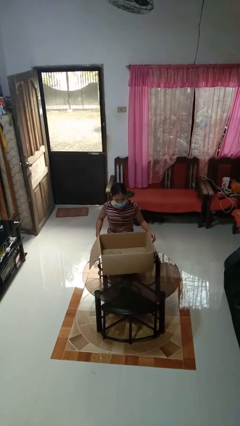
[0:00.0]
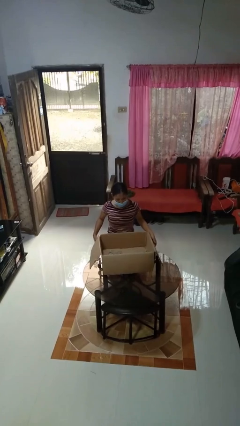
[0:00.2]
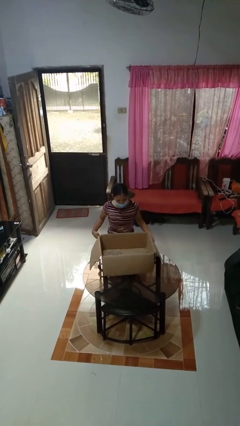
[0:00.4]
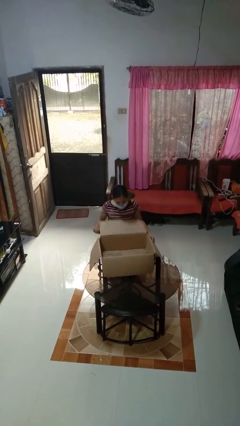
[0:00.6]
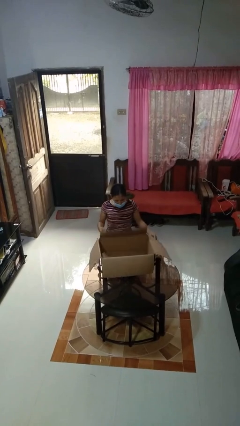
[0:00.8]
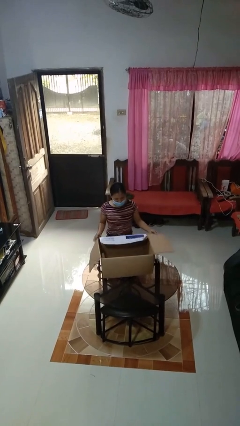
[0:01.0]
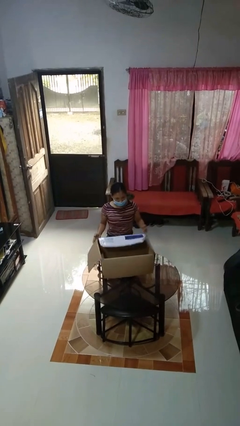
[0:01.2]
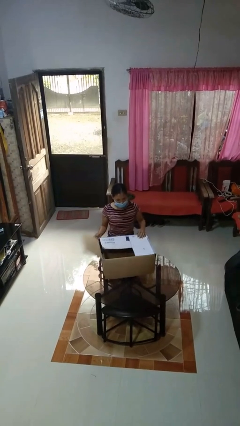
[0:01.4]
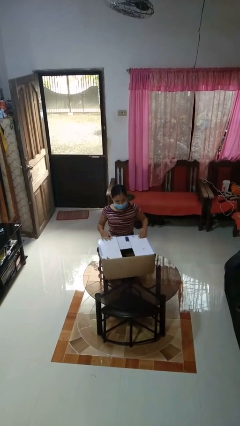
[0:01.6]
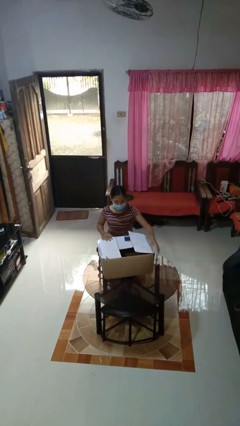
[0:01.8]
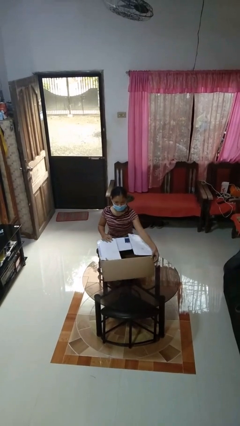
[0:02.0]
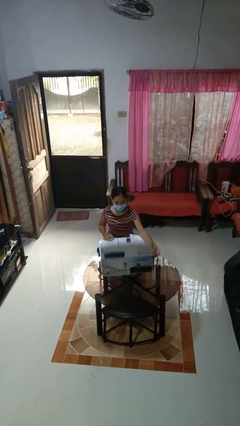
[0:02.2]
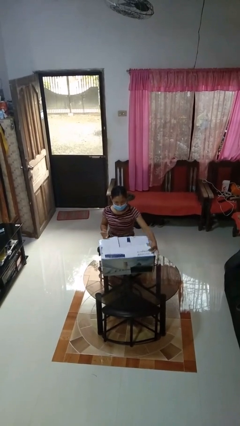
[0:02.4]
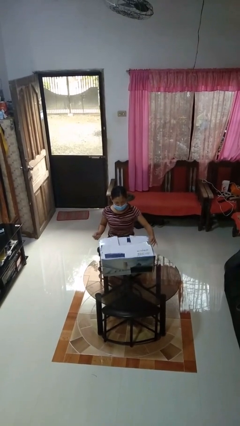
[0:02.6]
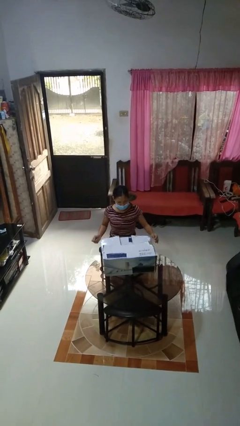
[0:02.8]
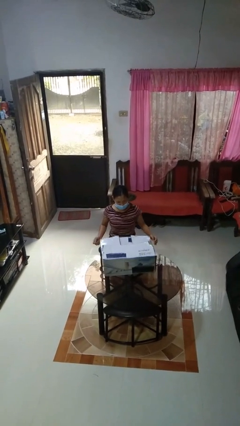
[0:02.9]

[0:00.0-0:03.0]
person closes box

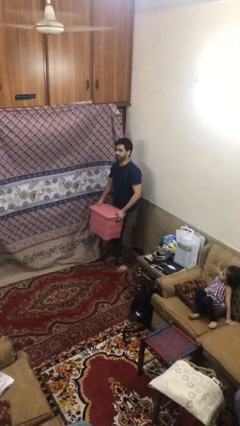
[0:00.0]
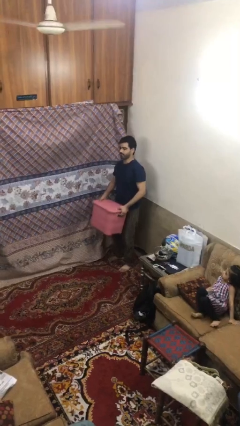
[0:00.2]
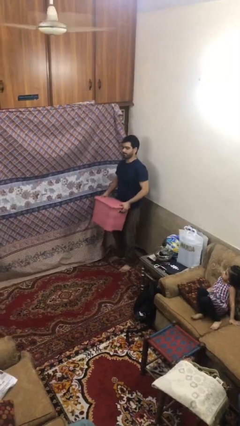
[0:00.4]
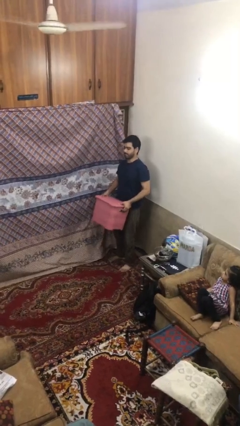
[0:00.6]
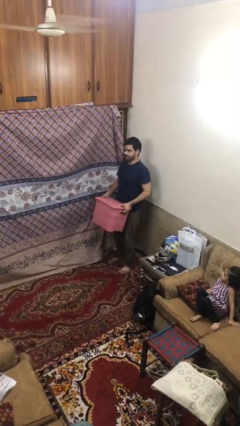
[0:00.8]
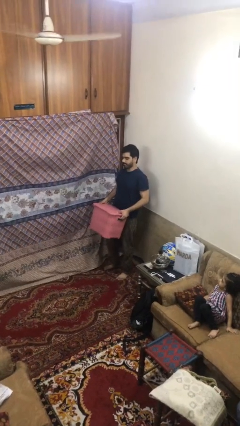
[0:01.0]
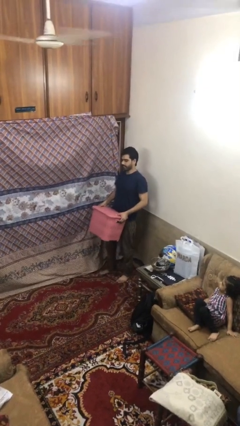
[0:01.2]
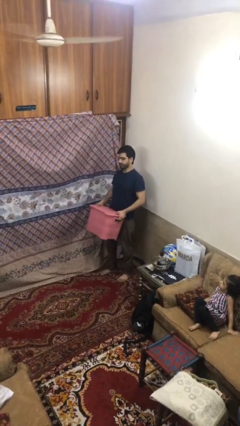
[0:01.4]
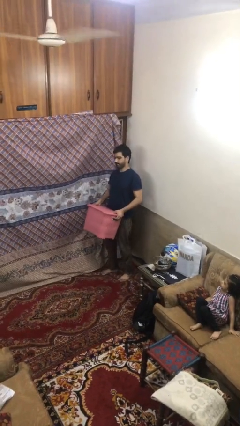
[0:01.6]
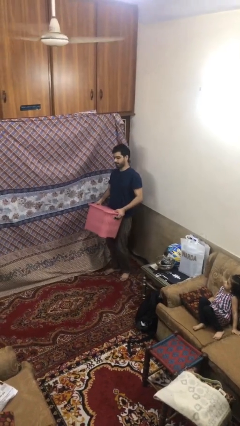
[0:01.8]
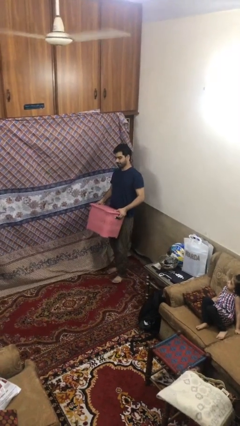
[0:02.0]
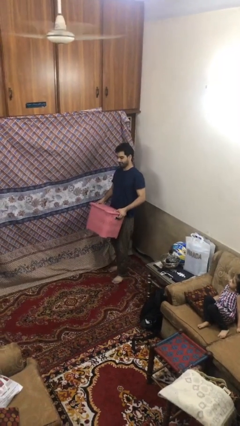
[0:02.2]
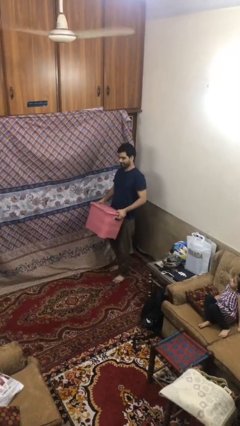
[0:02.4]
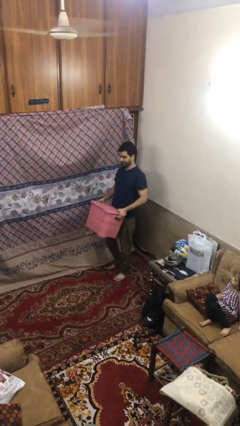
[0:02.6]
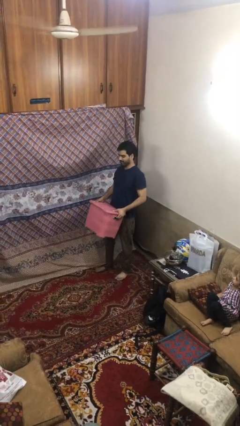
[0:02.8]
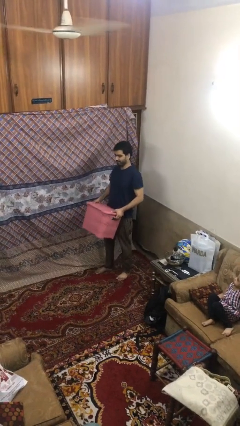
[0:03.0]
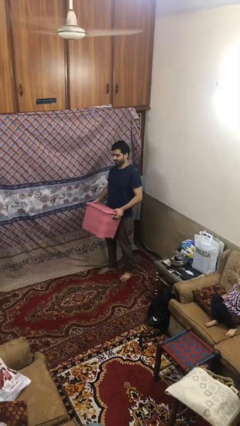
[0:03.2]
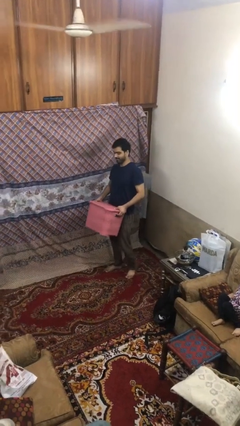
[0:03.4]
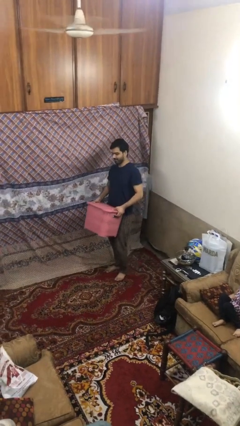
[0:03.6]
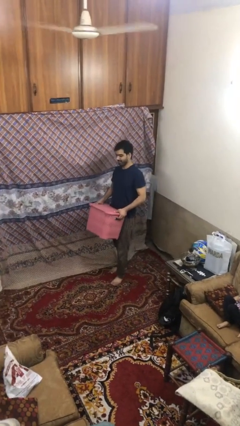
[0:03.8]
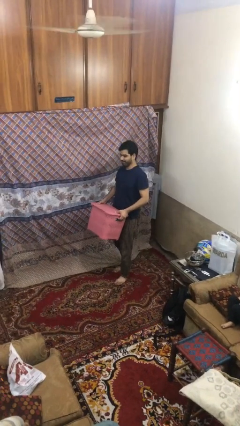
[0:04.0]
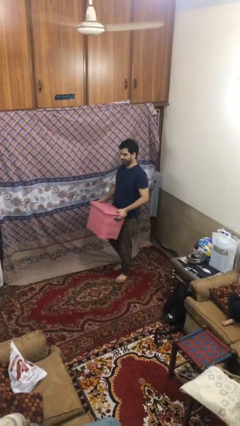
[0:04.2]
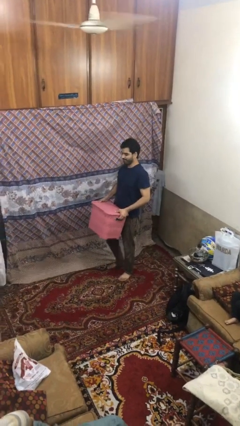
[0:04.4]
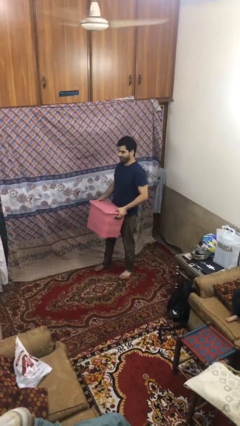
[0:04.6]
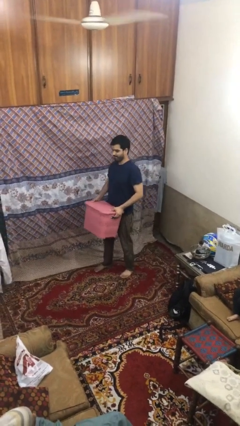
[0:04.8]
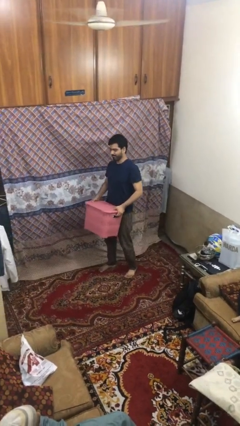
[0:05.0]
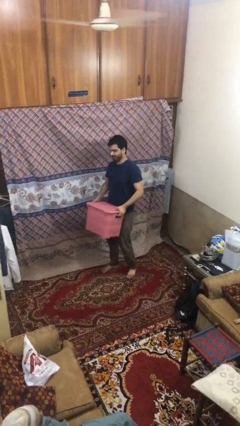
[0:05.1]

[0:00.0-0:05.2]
person carries heavy object

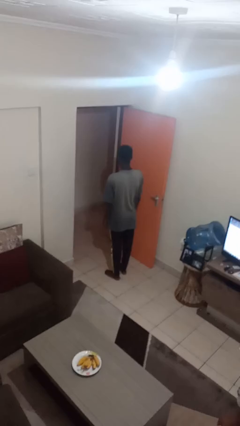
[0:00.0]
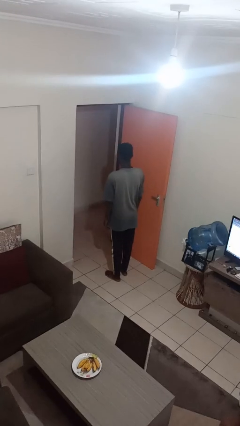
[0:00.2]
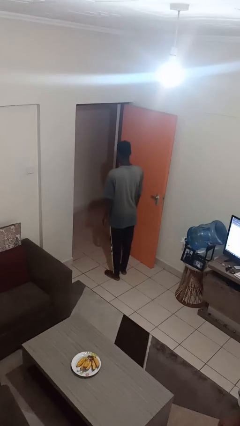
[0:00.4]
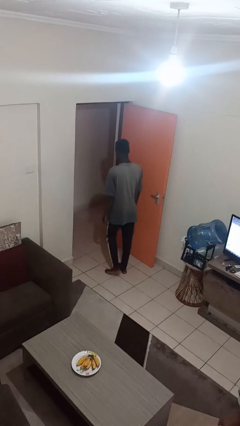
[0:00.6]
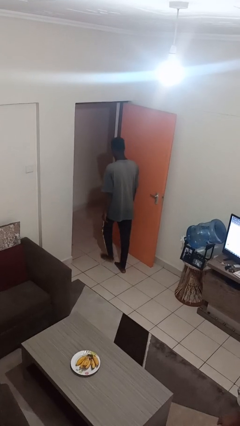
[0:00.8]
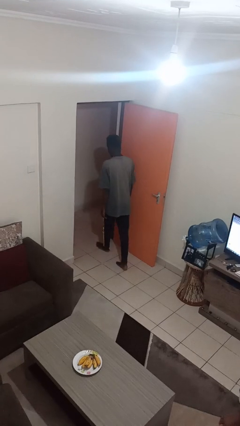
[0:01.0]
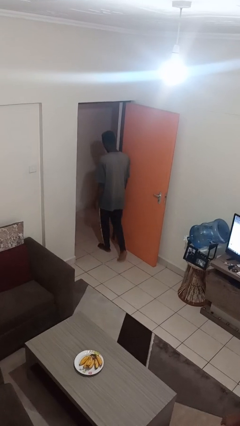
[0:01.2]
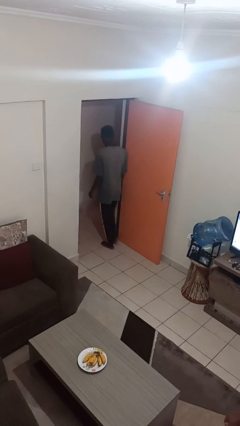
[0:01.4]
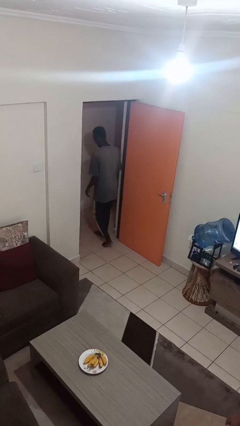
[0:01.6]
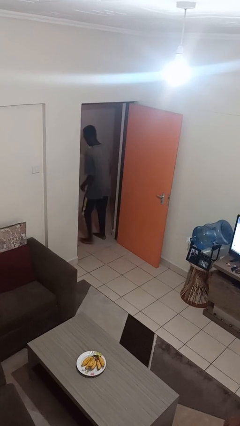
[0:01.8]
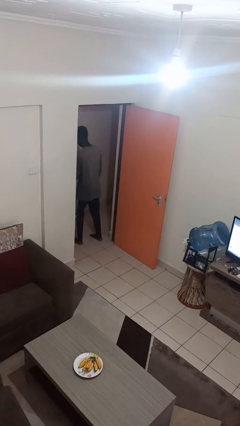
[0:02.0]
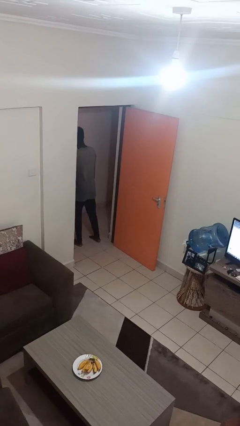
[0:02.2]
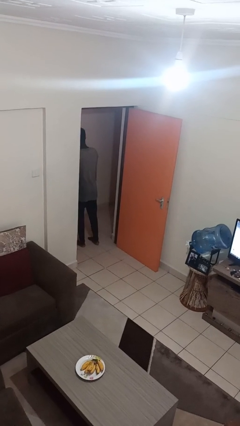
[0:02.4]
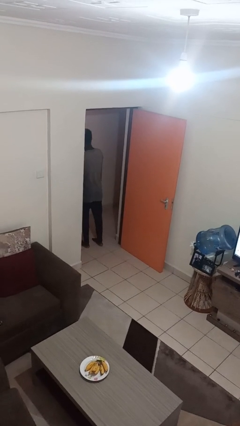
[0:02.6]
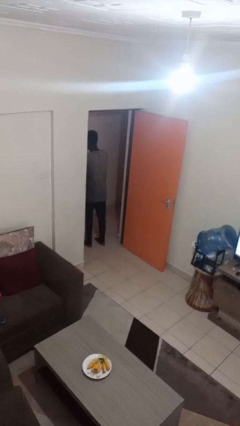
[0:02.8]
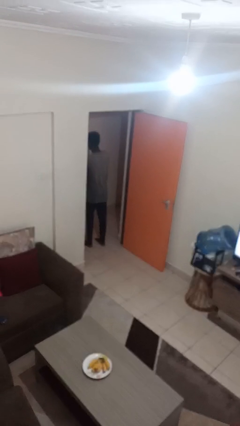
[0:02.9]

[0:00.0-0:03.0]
person bumps into wall

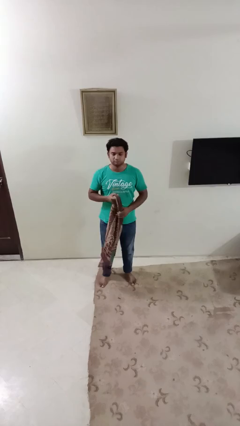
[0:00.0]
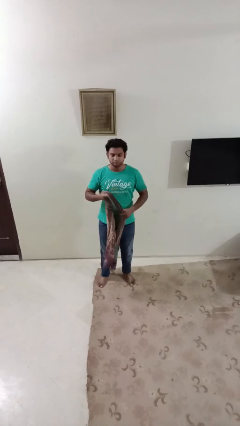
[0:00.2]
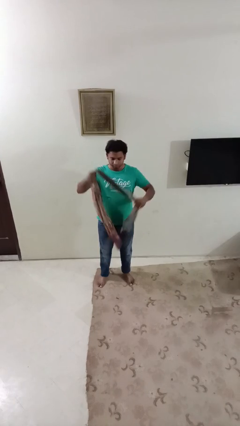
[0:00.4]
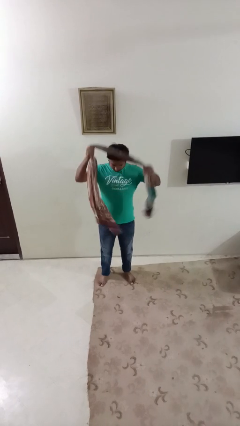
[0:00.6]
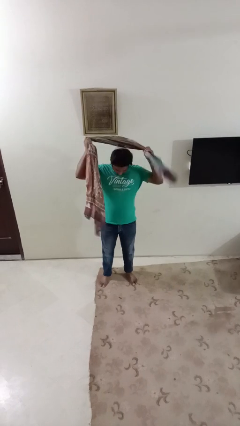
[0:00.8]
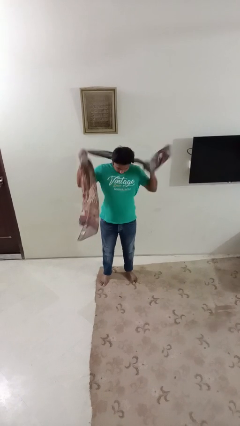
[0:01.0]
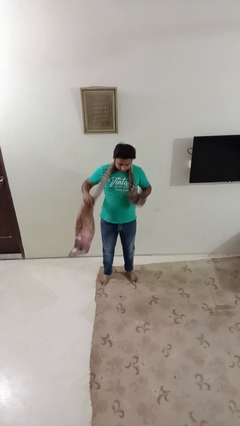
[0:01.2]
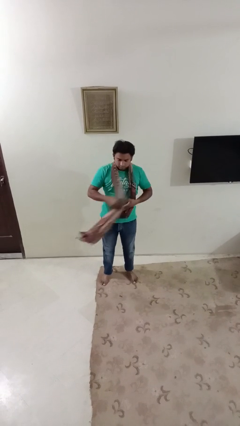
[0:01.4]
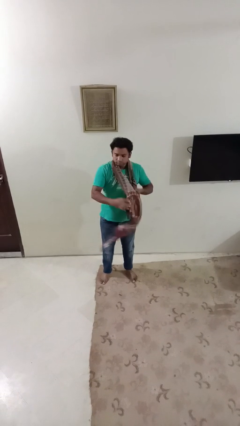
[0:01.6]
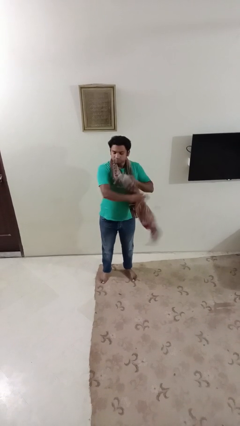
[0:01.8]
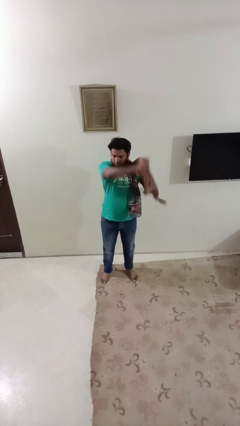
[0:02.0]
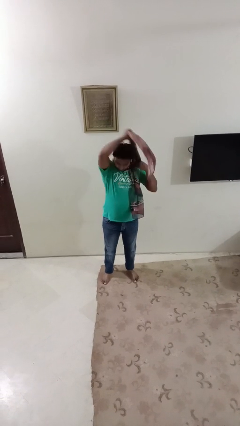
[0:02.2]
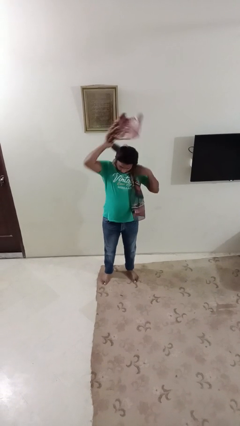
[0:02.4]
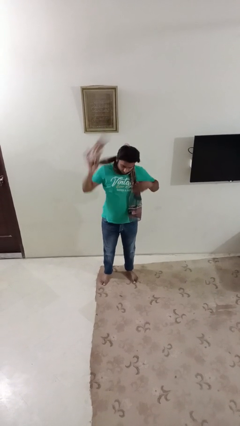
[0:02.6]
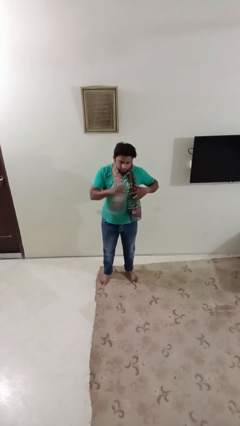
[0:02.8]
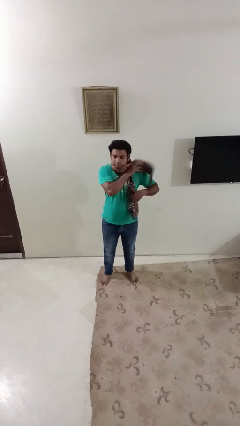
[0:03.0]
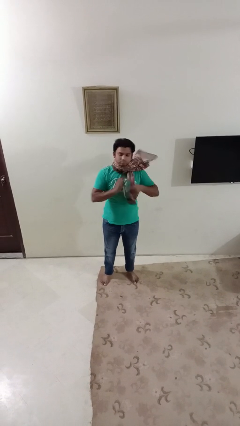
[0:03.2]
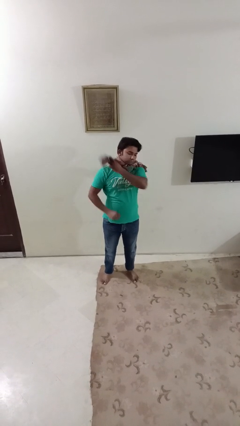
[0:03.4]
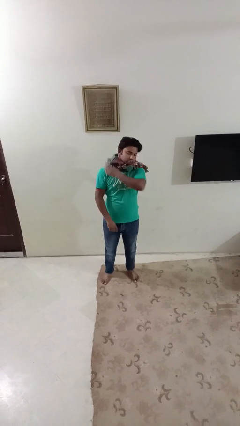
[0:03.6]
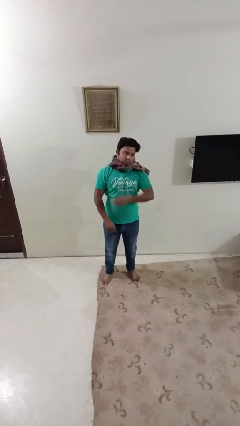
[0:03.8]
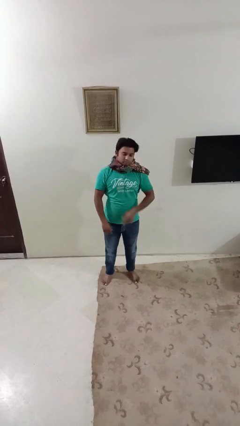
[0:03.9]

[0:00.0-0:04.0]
person puts on scarf

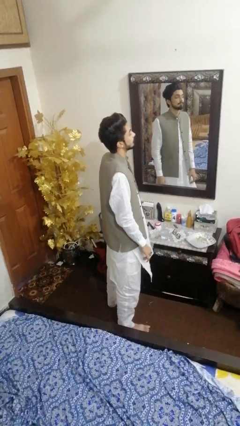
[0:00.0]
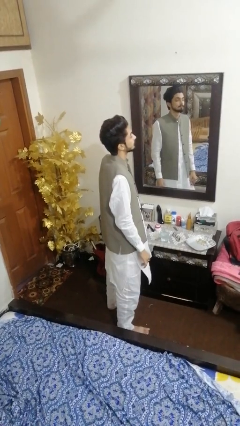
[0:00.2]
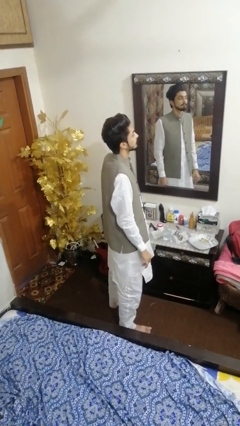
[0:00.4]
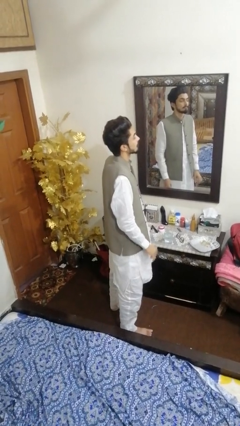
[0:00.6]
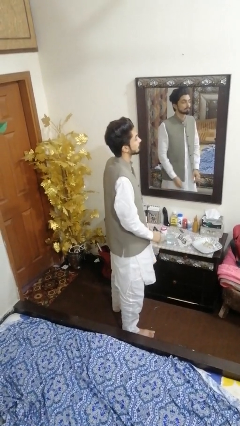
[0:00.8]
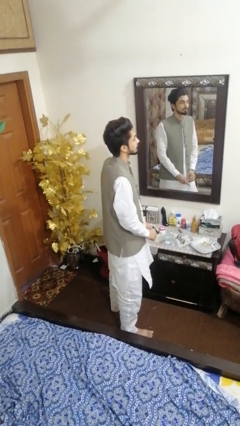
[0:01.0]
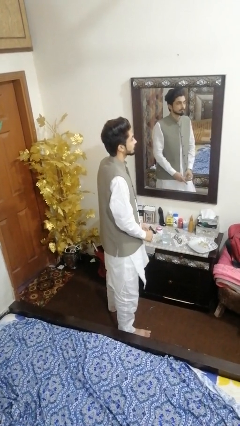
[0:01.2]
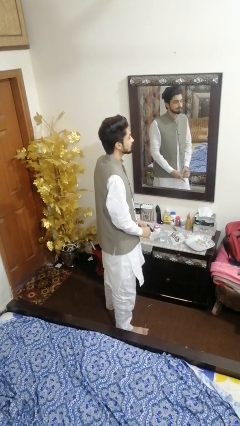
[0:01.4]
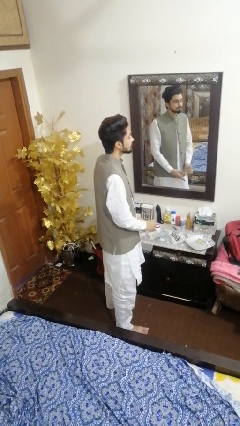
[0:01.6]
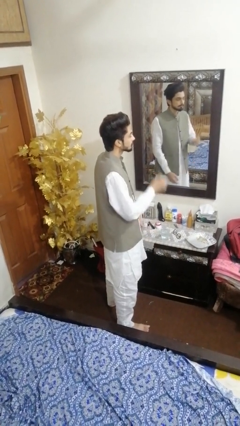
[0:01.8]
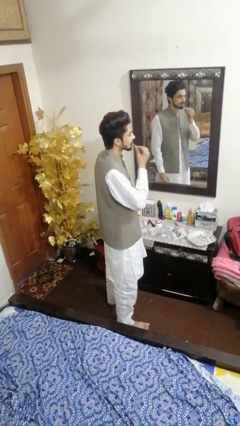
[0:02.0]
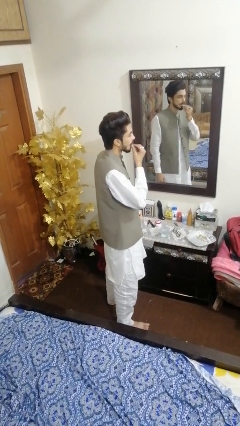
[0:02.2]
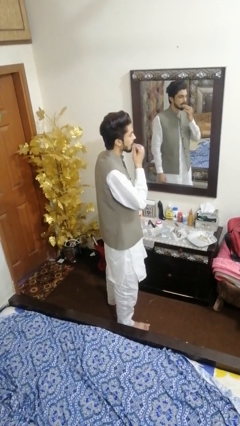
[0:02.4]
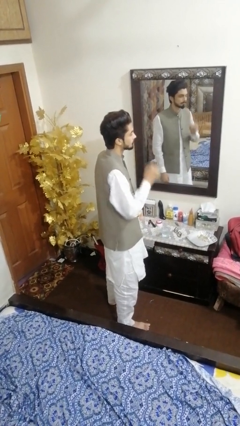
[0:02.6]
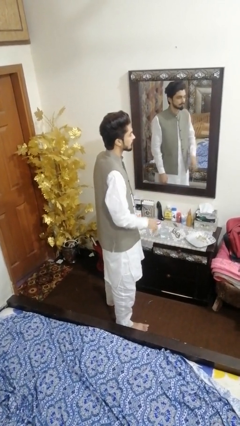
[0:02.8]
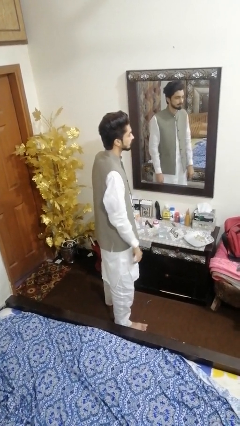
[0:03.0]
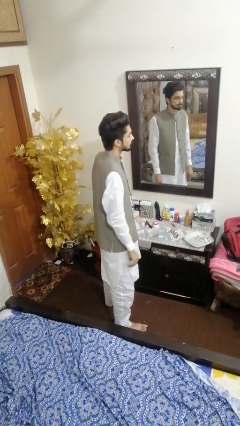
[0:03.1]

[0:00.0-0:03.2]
person takes medicine pills
